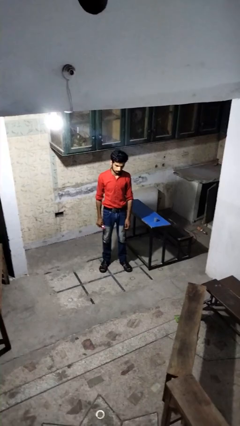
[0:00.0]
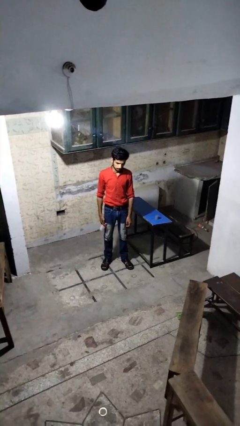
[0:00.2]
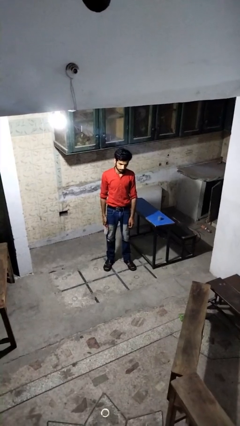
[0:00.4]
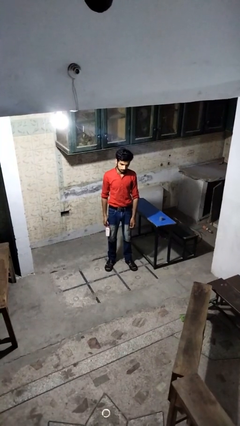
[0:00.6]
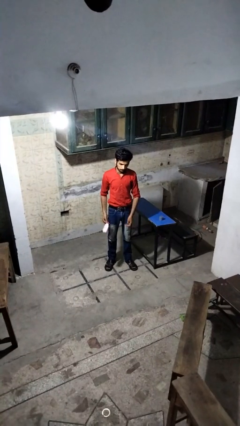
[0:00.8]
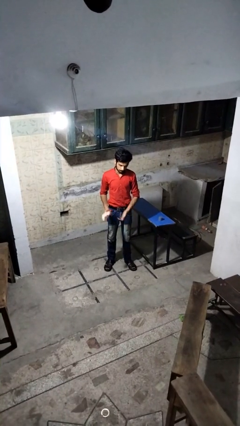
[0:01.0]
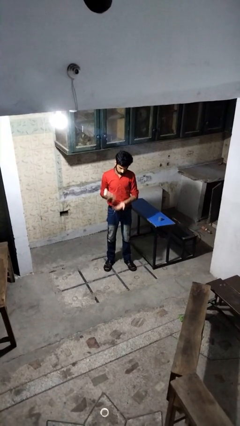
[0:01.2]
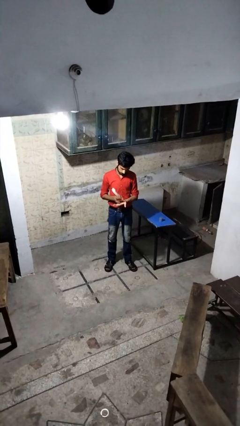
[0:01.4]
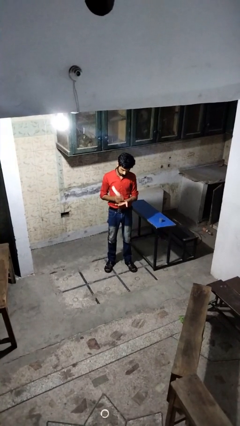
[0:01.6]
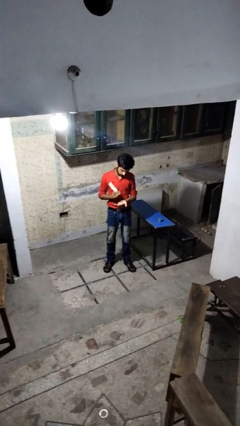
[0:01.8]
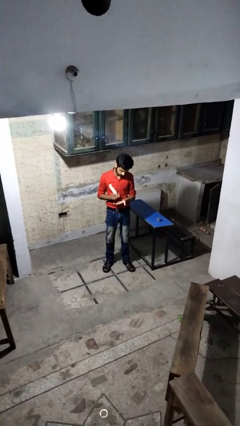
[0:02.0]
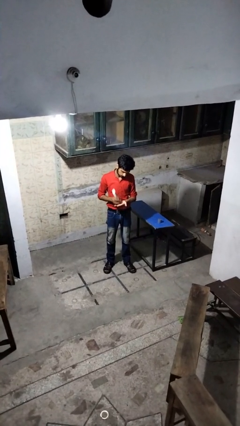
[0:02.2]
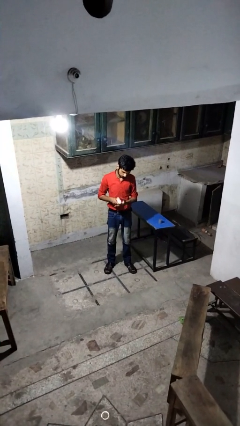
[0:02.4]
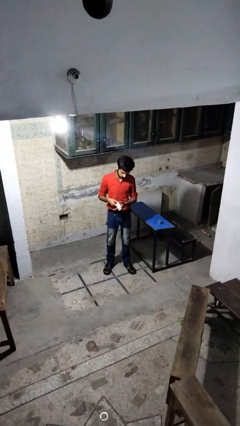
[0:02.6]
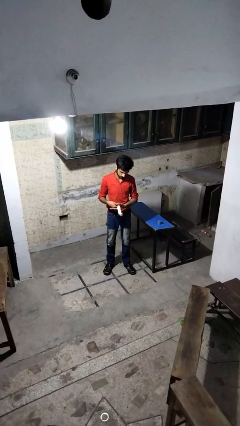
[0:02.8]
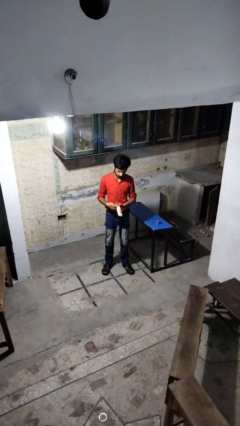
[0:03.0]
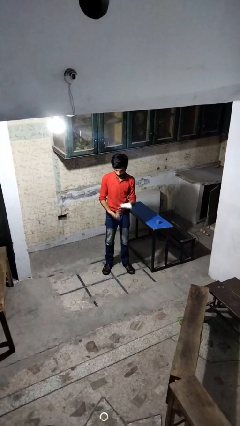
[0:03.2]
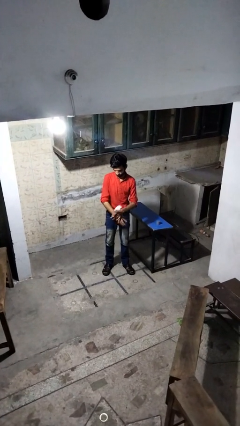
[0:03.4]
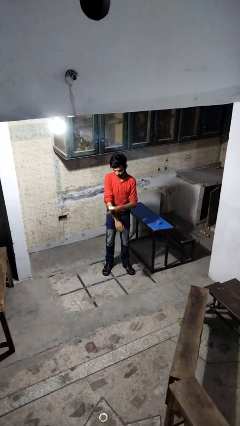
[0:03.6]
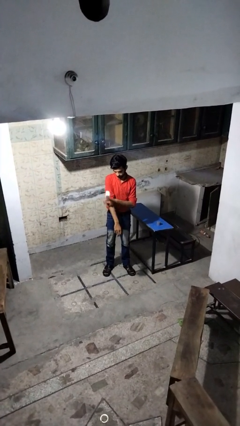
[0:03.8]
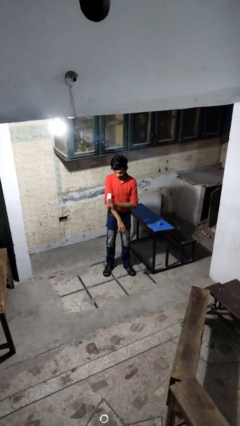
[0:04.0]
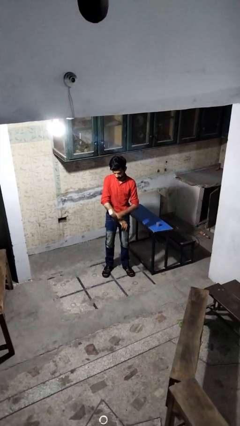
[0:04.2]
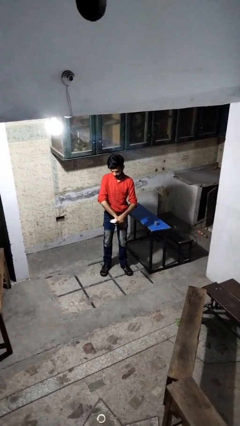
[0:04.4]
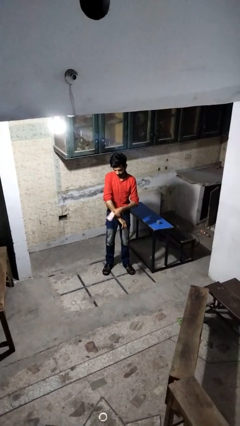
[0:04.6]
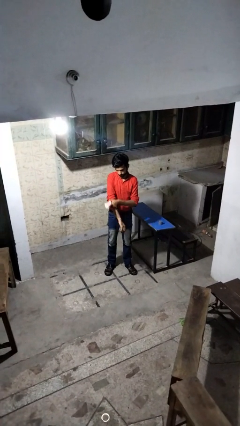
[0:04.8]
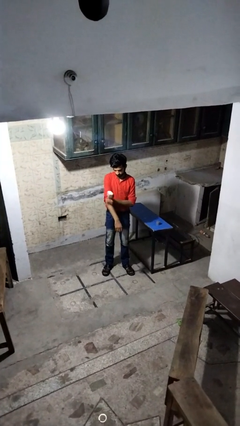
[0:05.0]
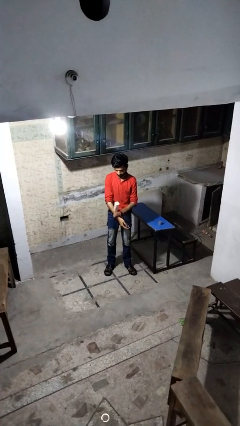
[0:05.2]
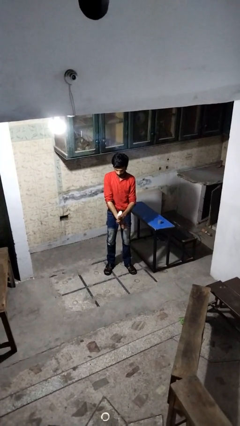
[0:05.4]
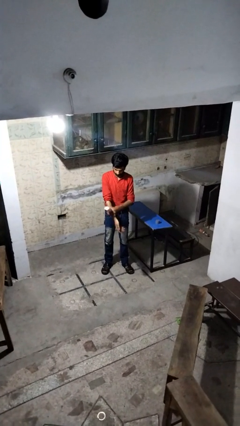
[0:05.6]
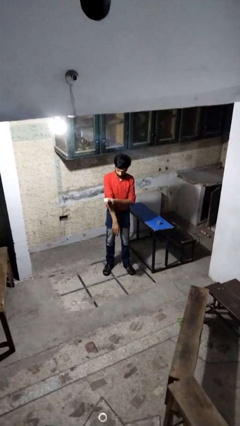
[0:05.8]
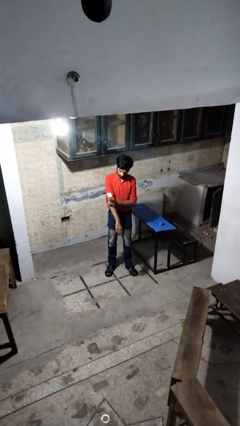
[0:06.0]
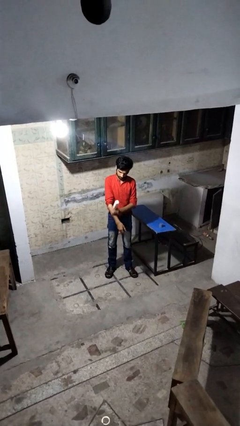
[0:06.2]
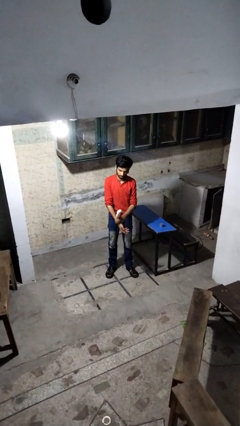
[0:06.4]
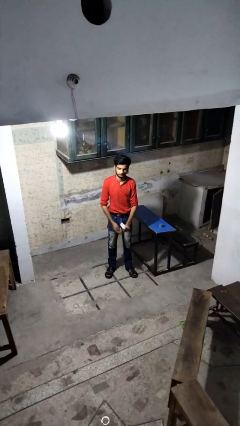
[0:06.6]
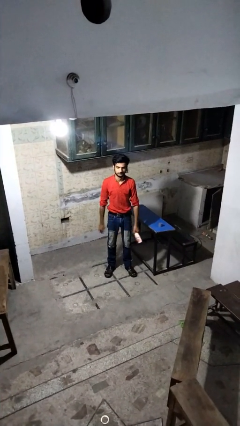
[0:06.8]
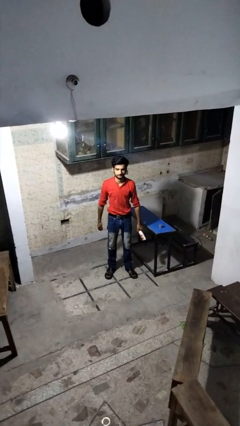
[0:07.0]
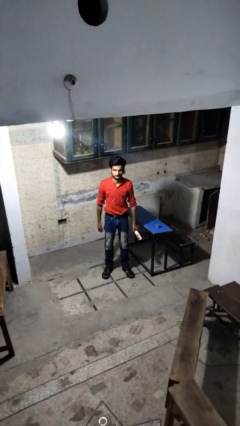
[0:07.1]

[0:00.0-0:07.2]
person applies sunscreen

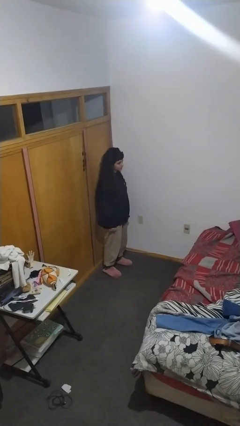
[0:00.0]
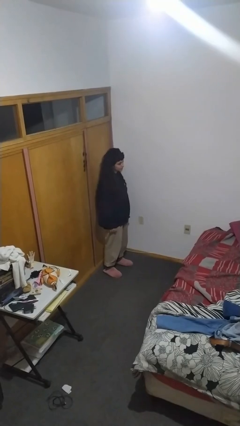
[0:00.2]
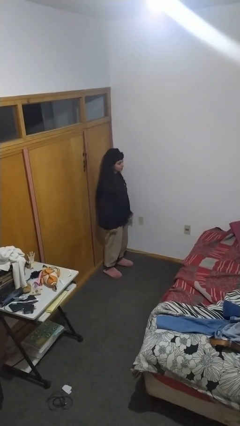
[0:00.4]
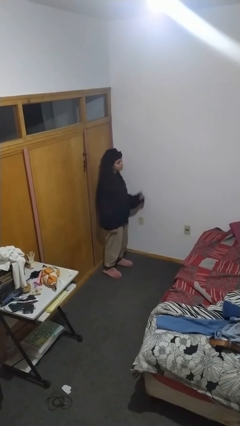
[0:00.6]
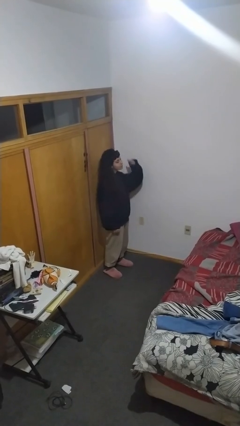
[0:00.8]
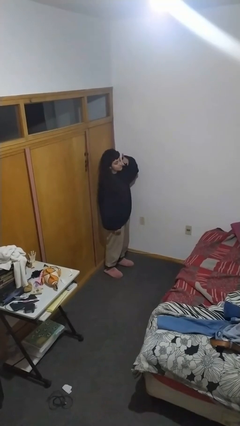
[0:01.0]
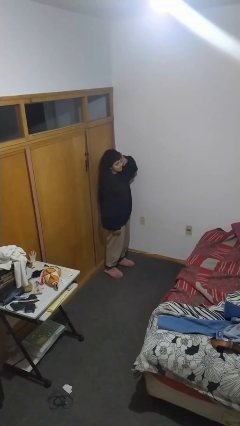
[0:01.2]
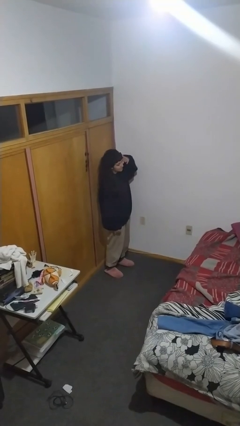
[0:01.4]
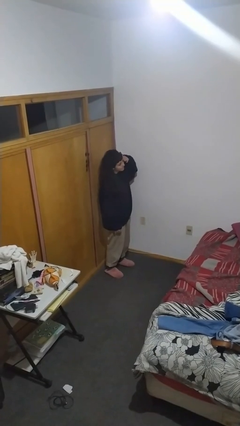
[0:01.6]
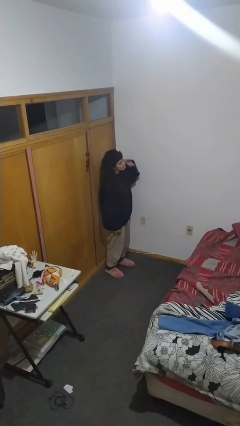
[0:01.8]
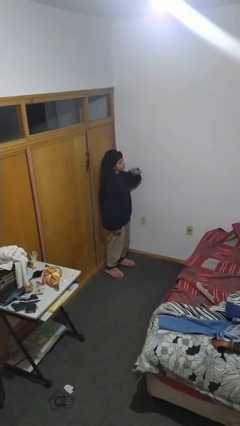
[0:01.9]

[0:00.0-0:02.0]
person gestures call me

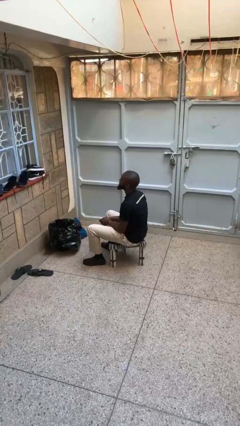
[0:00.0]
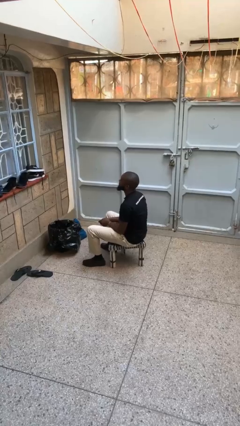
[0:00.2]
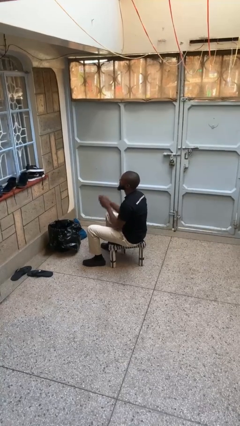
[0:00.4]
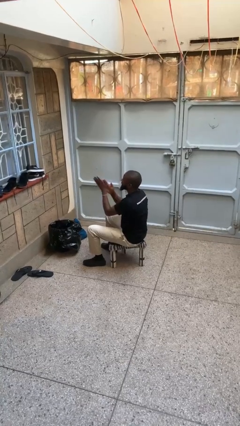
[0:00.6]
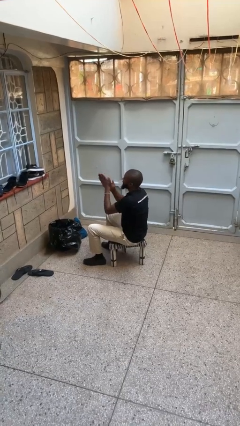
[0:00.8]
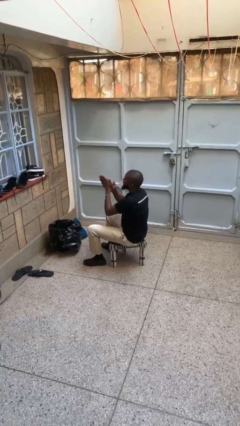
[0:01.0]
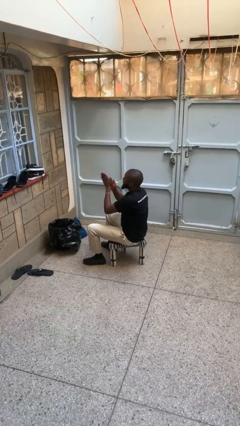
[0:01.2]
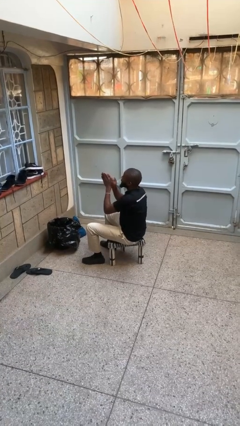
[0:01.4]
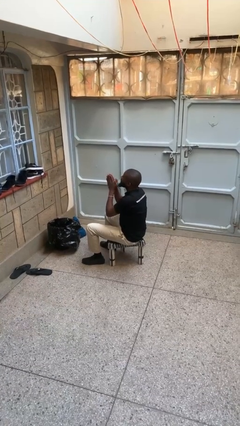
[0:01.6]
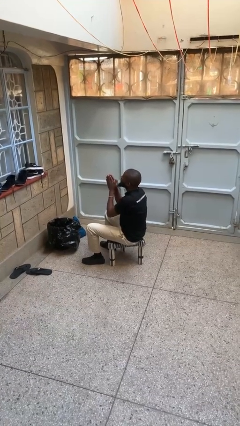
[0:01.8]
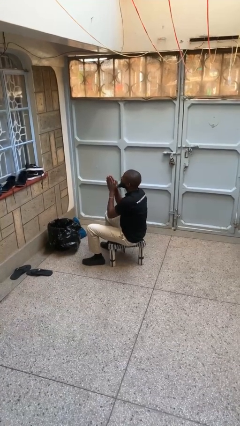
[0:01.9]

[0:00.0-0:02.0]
person blows into hands

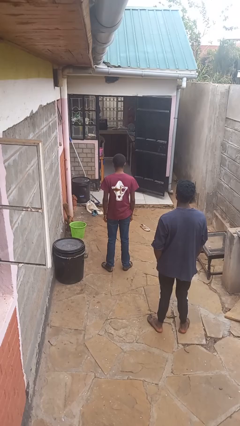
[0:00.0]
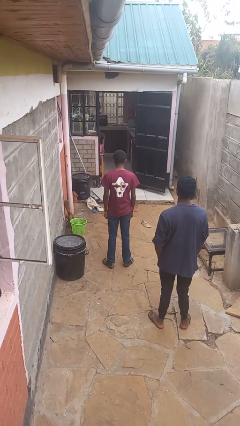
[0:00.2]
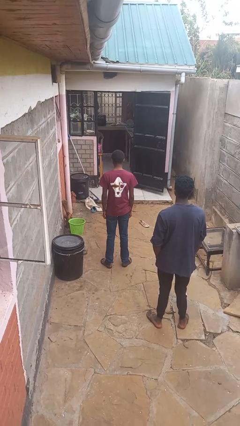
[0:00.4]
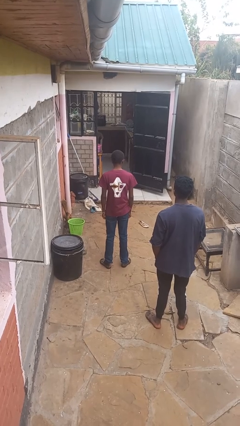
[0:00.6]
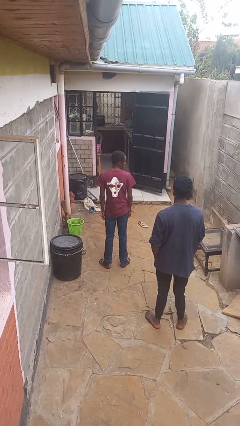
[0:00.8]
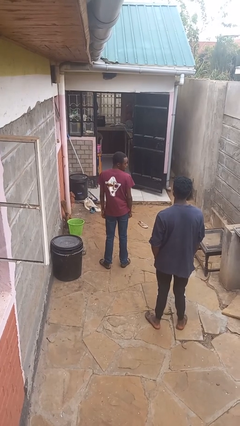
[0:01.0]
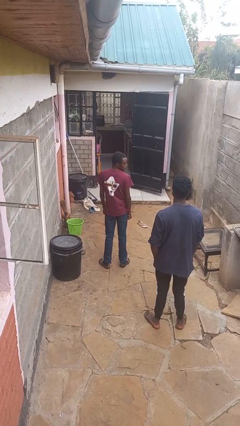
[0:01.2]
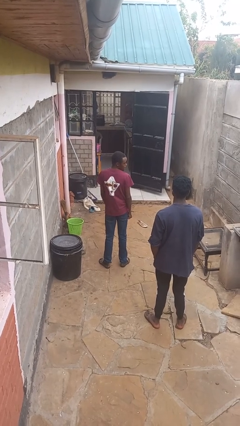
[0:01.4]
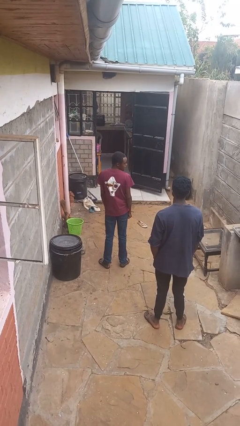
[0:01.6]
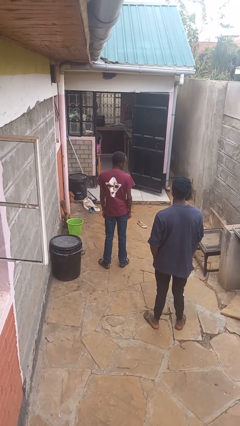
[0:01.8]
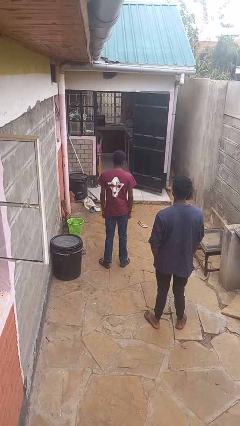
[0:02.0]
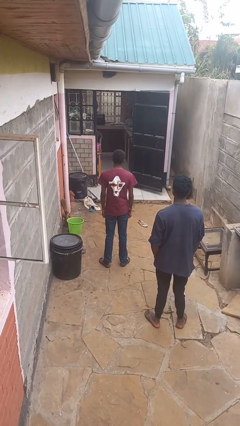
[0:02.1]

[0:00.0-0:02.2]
person looks over shoulder

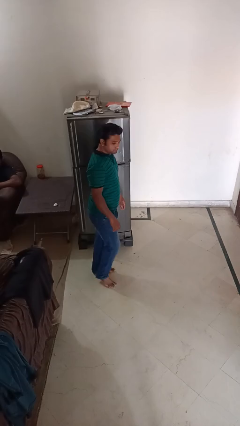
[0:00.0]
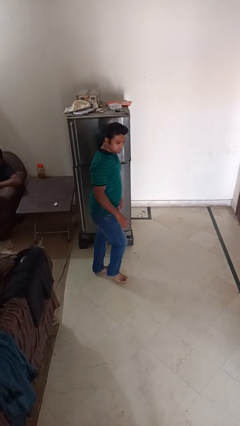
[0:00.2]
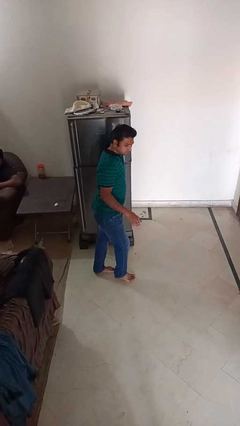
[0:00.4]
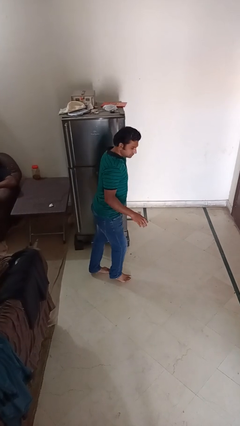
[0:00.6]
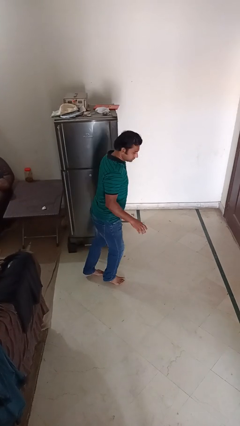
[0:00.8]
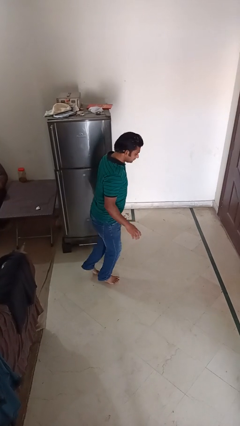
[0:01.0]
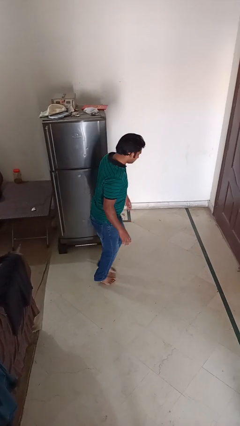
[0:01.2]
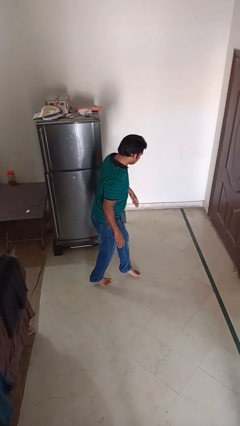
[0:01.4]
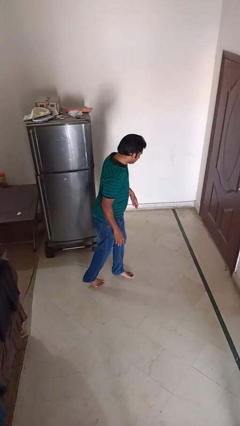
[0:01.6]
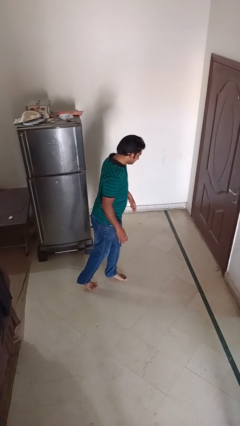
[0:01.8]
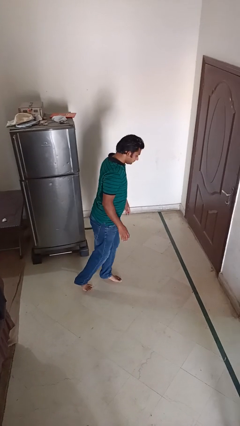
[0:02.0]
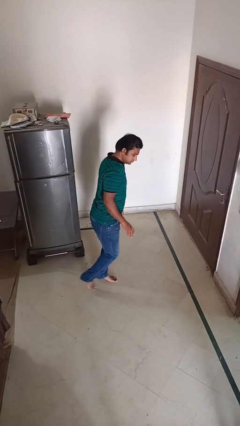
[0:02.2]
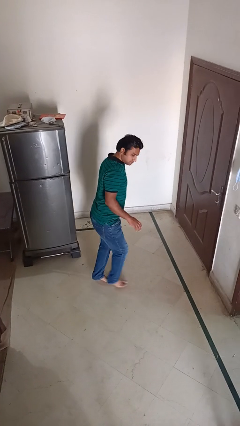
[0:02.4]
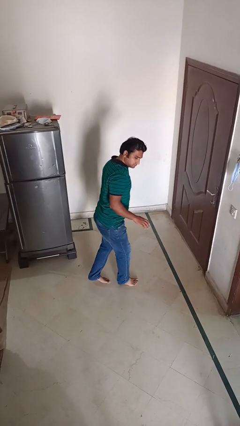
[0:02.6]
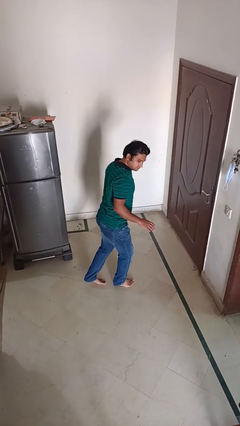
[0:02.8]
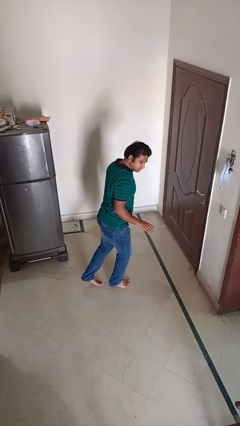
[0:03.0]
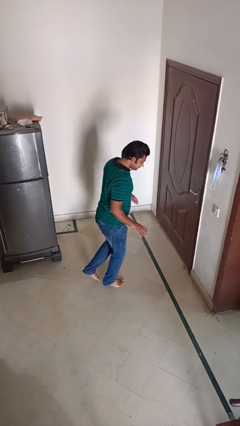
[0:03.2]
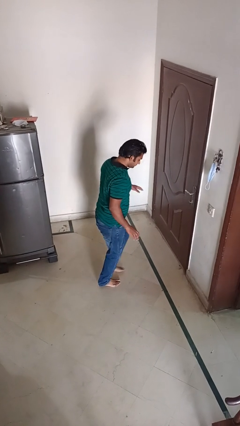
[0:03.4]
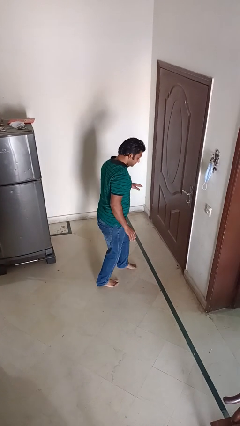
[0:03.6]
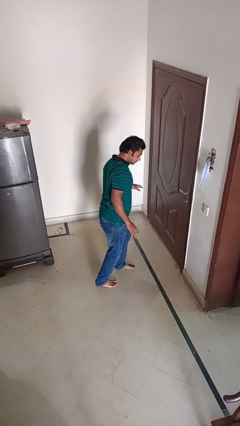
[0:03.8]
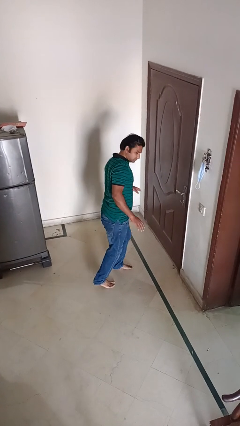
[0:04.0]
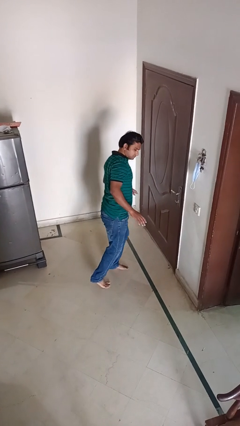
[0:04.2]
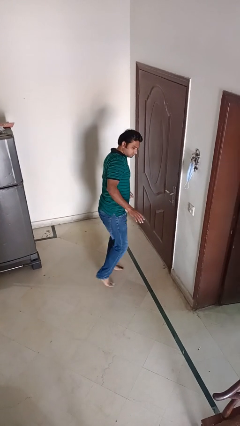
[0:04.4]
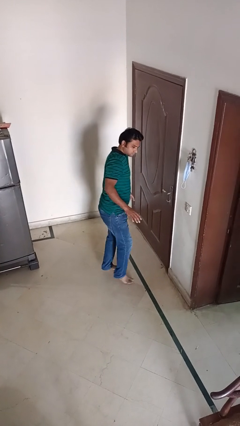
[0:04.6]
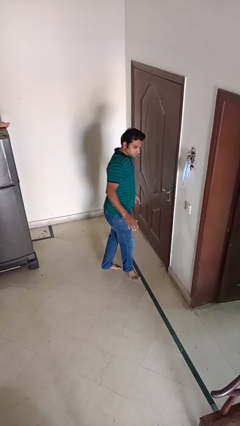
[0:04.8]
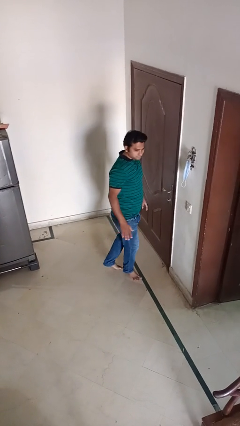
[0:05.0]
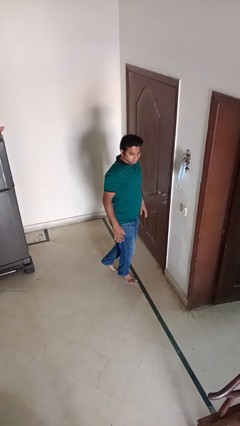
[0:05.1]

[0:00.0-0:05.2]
person walks tiptoe
